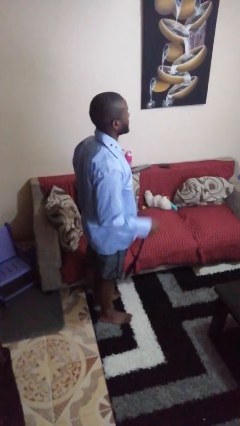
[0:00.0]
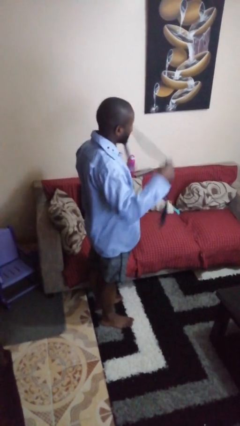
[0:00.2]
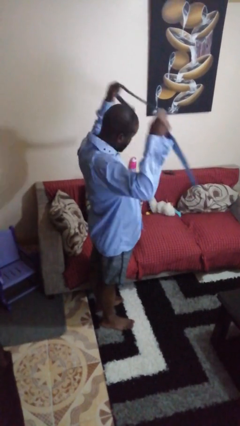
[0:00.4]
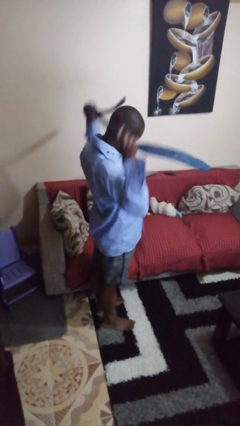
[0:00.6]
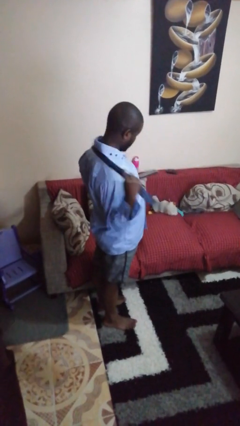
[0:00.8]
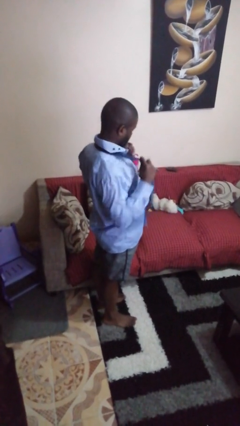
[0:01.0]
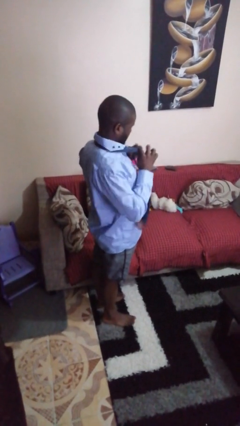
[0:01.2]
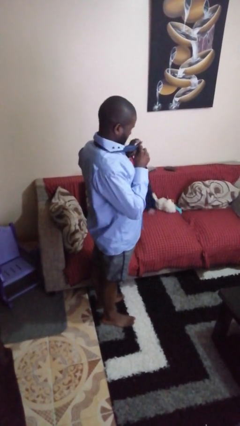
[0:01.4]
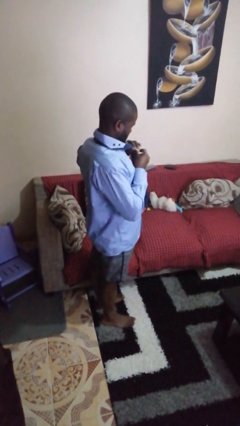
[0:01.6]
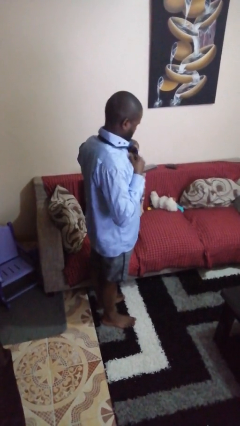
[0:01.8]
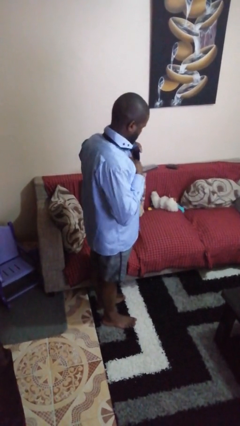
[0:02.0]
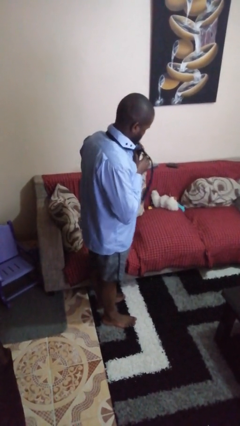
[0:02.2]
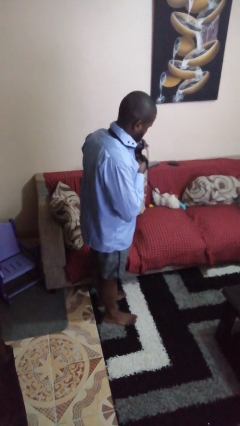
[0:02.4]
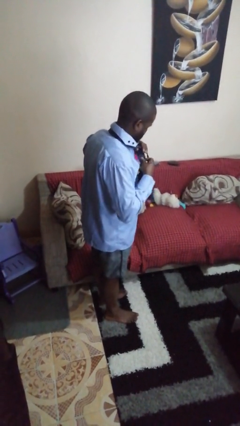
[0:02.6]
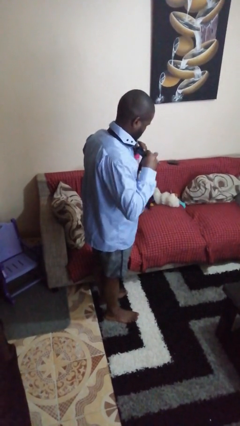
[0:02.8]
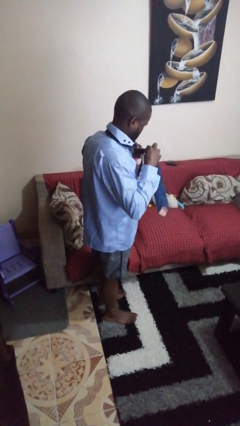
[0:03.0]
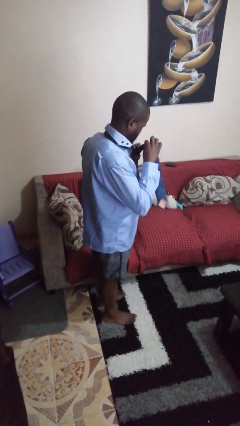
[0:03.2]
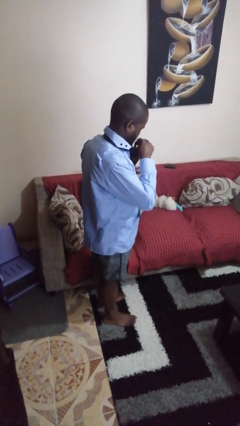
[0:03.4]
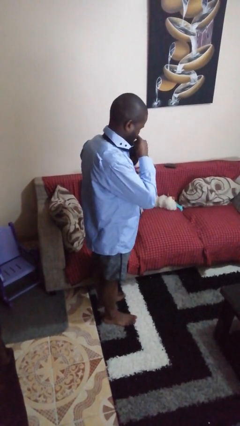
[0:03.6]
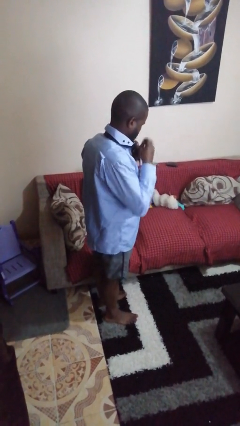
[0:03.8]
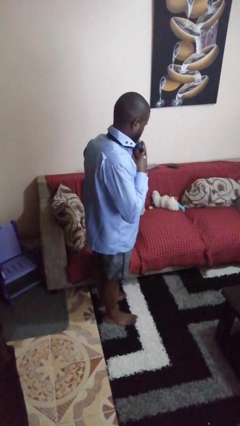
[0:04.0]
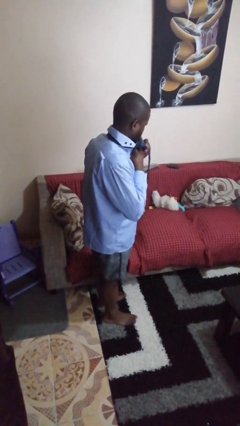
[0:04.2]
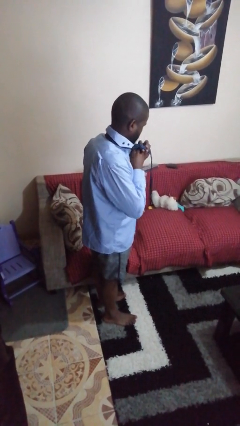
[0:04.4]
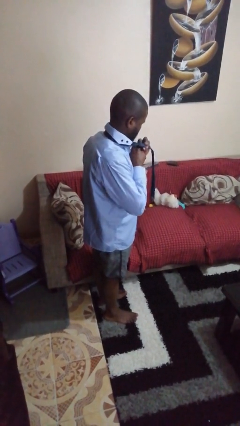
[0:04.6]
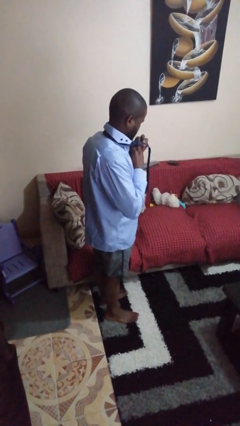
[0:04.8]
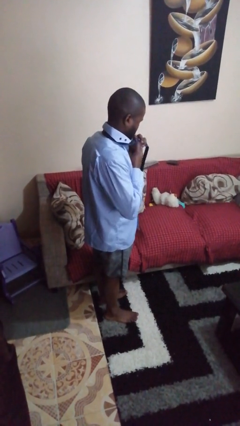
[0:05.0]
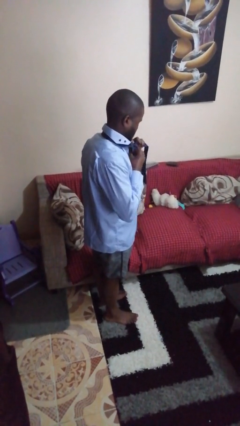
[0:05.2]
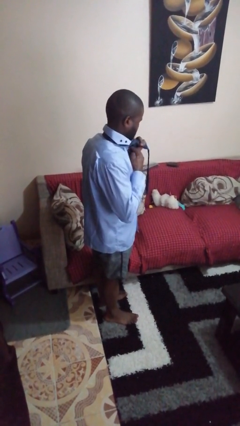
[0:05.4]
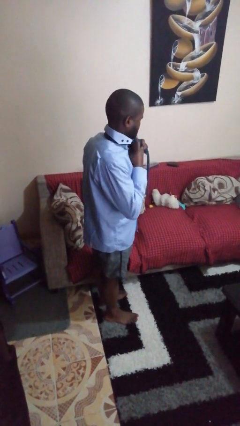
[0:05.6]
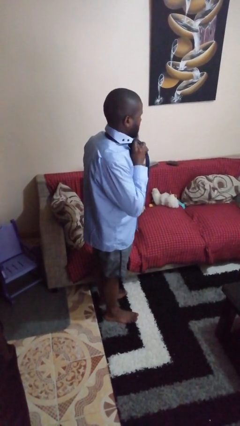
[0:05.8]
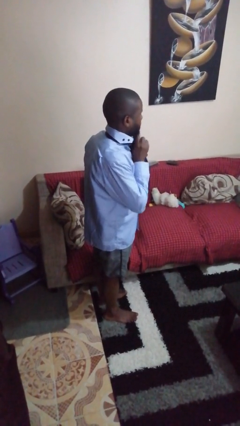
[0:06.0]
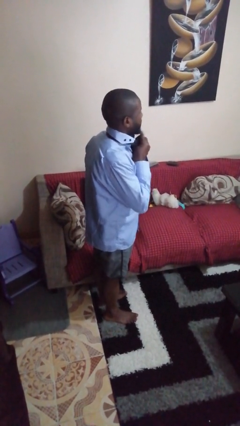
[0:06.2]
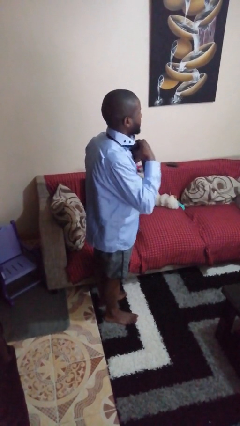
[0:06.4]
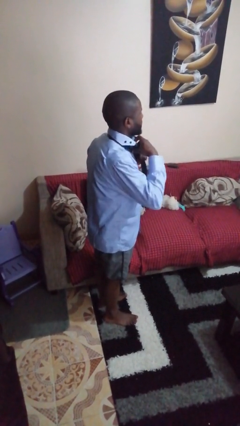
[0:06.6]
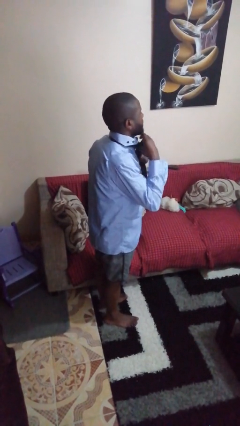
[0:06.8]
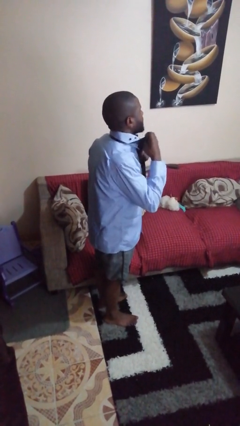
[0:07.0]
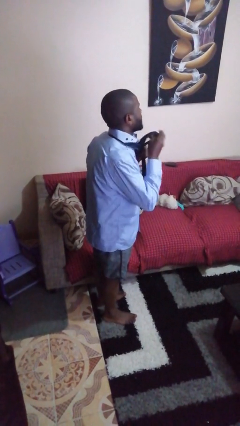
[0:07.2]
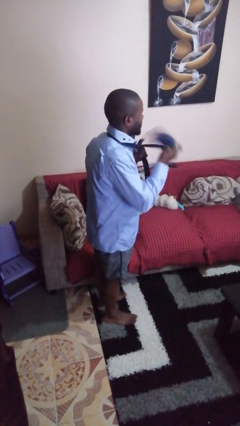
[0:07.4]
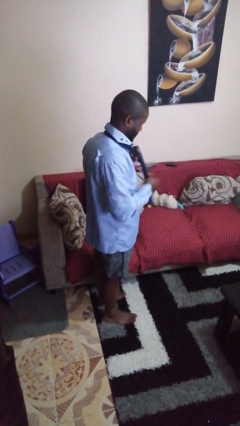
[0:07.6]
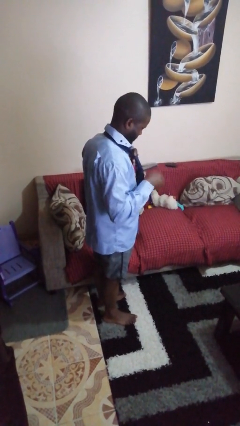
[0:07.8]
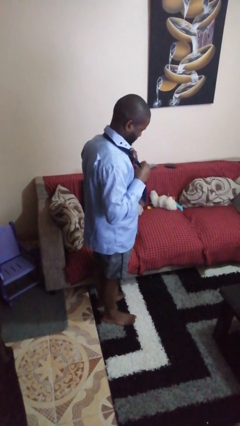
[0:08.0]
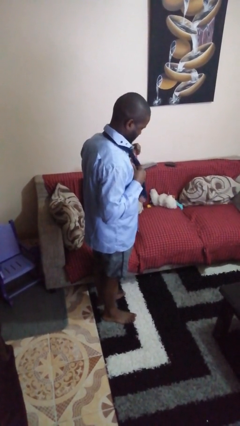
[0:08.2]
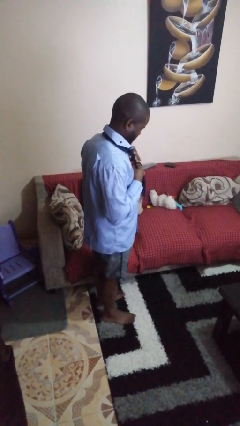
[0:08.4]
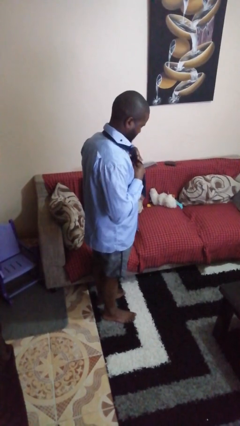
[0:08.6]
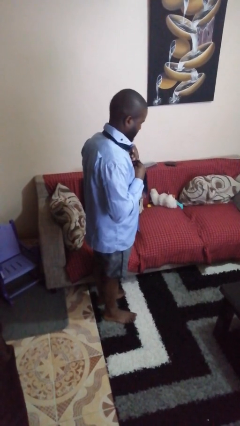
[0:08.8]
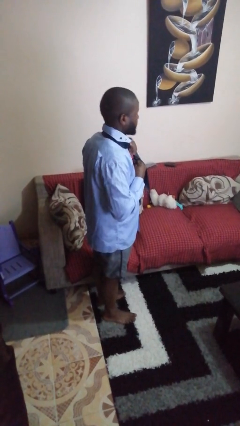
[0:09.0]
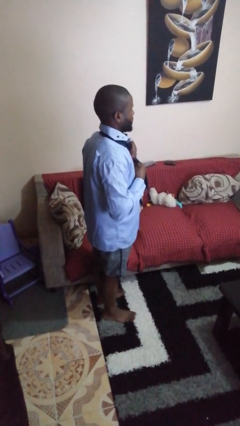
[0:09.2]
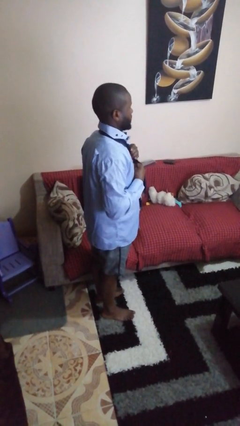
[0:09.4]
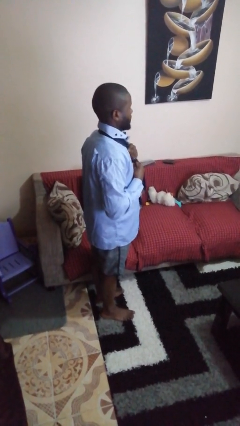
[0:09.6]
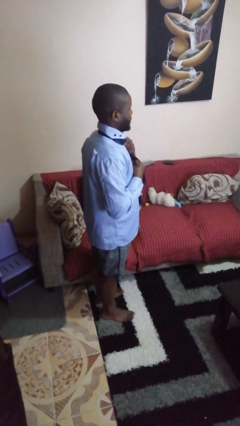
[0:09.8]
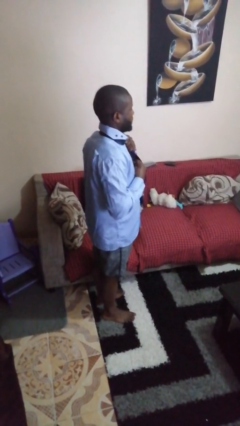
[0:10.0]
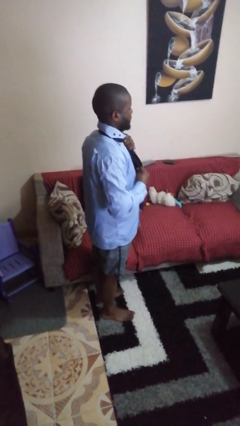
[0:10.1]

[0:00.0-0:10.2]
person puts on necktie

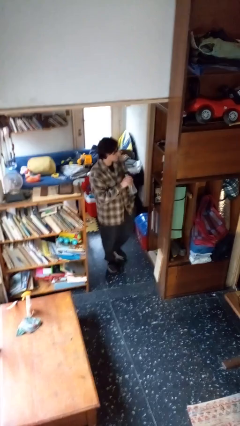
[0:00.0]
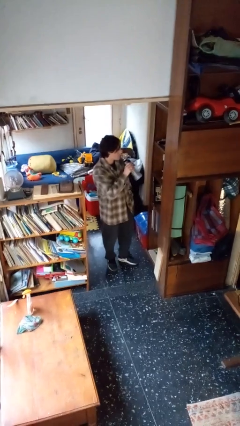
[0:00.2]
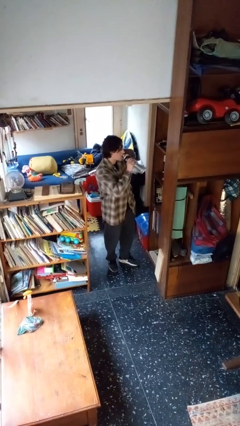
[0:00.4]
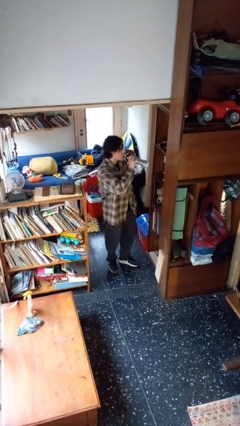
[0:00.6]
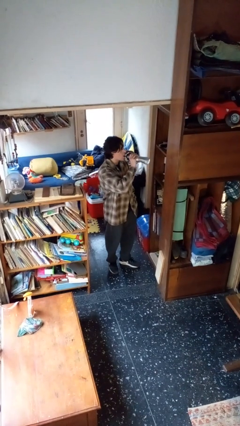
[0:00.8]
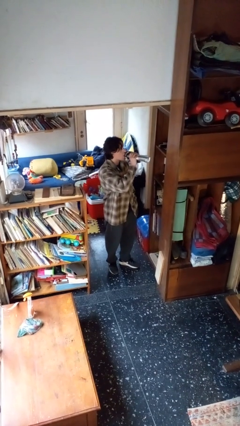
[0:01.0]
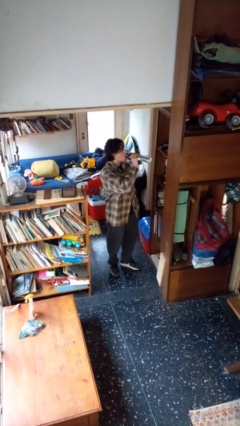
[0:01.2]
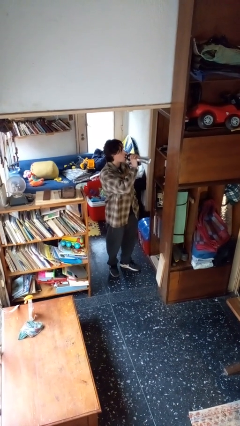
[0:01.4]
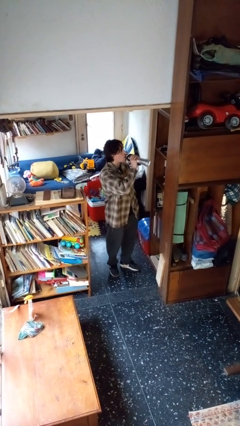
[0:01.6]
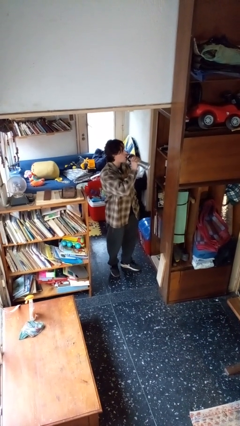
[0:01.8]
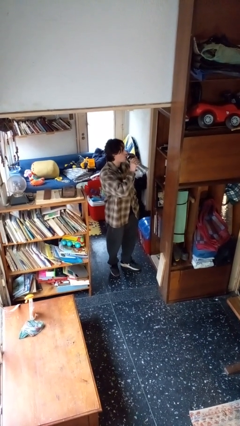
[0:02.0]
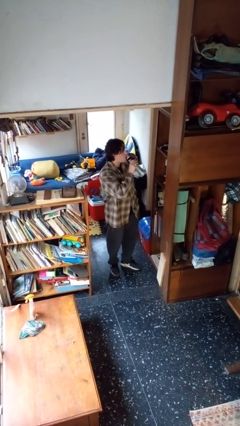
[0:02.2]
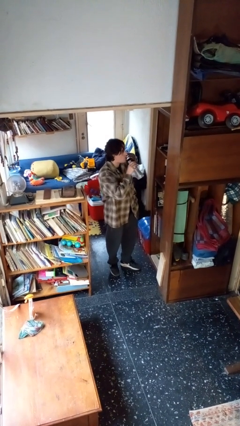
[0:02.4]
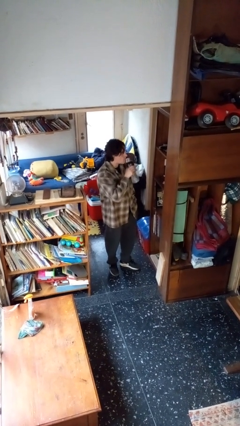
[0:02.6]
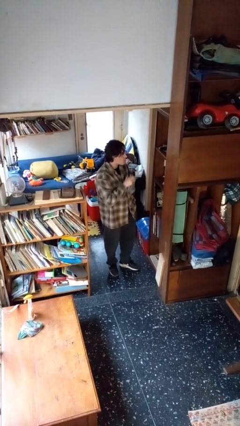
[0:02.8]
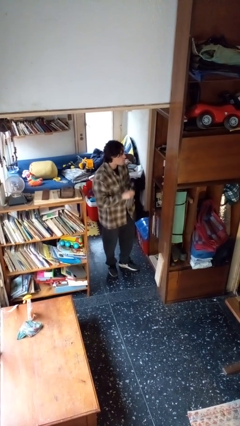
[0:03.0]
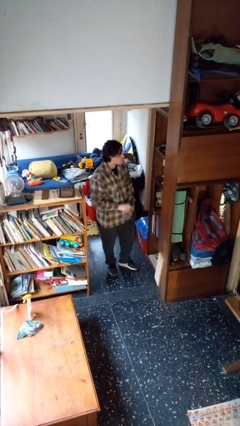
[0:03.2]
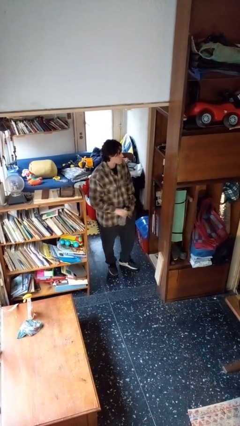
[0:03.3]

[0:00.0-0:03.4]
person drinks from bottle

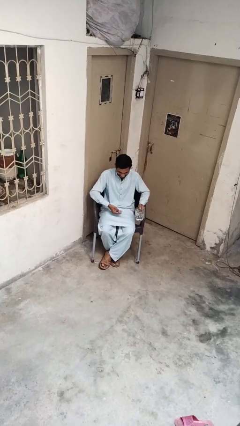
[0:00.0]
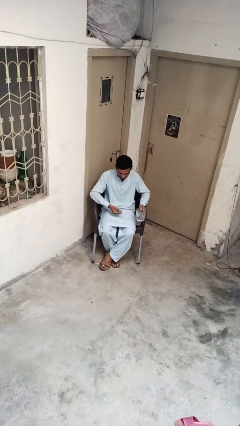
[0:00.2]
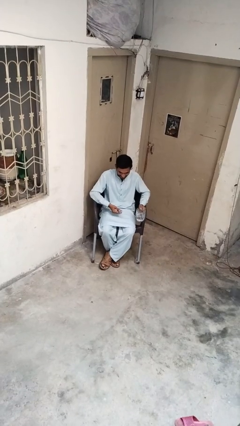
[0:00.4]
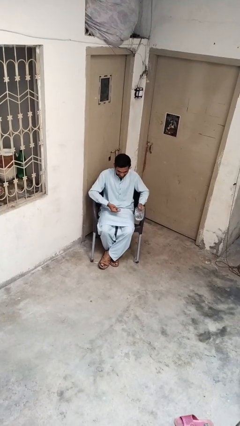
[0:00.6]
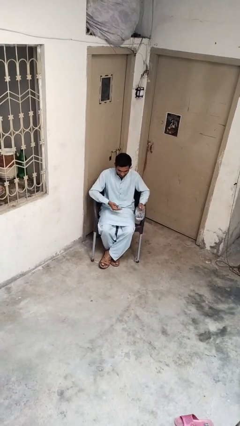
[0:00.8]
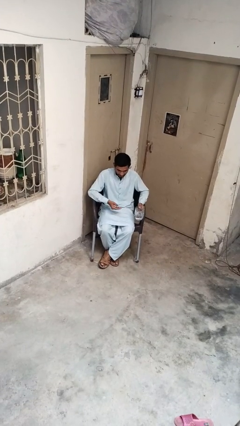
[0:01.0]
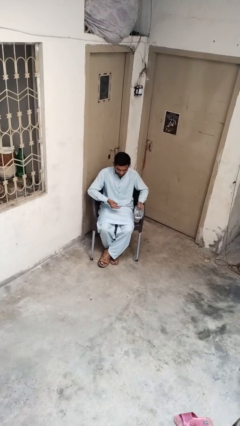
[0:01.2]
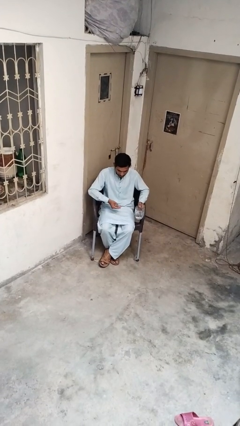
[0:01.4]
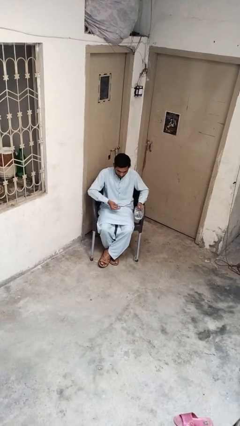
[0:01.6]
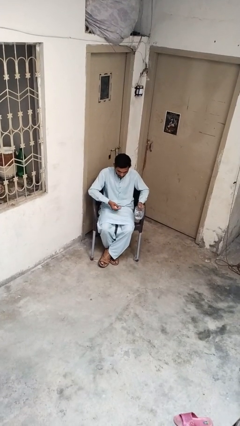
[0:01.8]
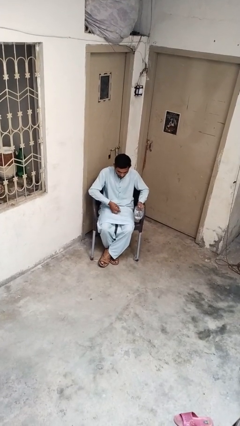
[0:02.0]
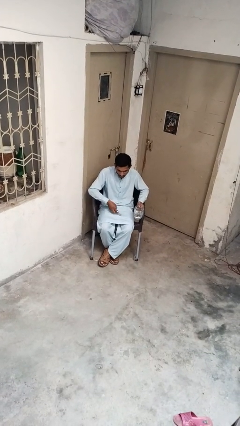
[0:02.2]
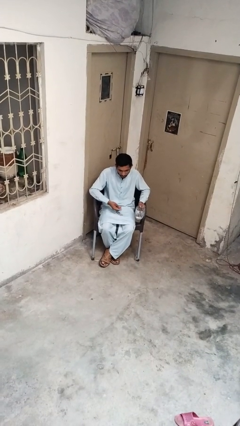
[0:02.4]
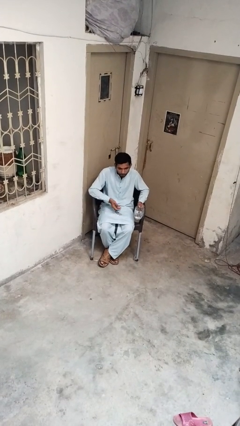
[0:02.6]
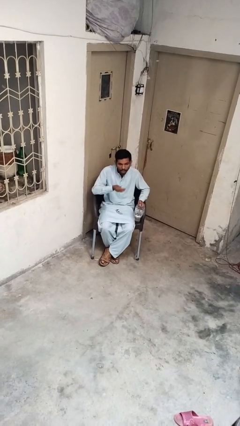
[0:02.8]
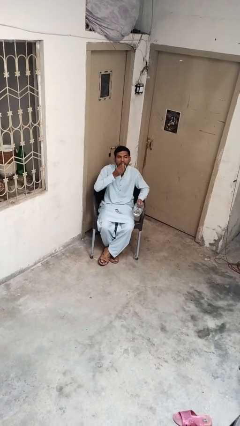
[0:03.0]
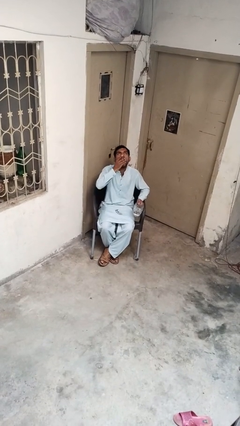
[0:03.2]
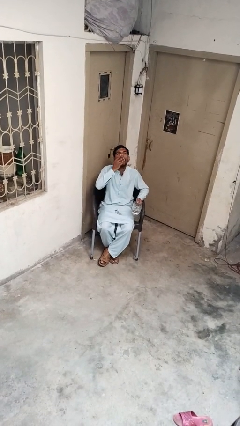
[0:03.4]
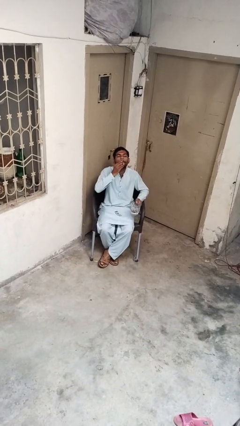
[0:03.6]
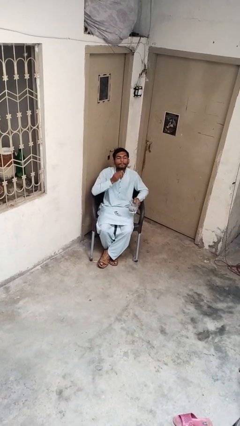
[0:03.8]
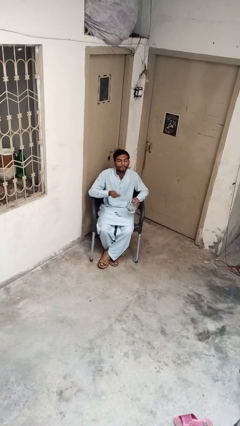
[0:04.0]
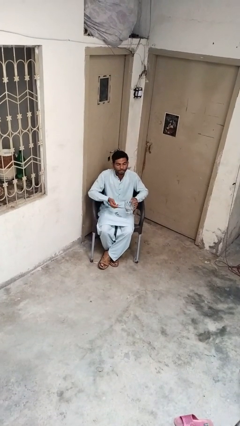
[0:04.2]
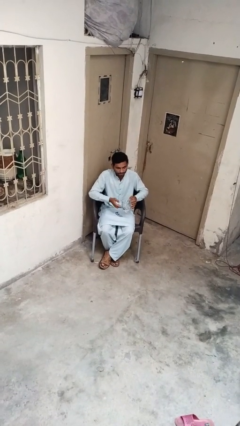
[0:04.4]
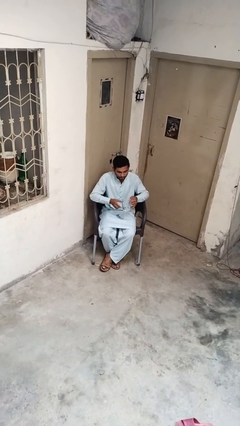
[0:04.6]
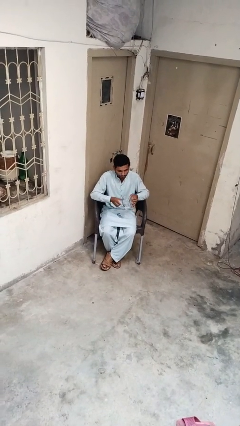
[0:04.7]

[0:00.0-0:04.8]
person takes medicine pills
